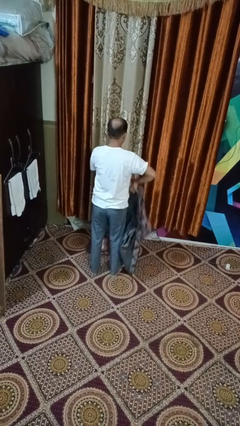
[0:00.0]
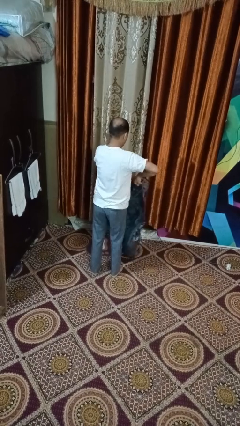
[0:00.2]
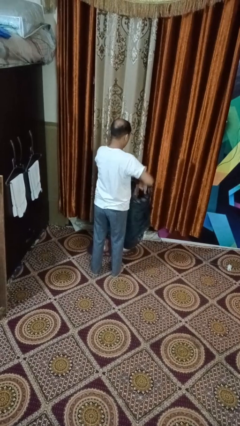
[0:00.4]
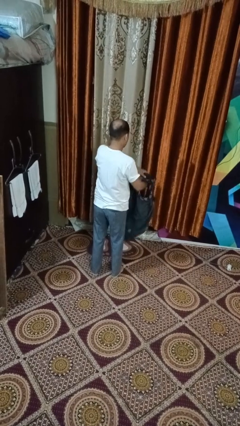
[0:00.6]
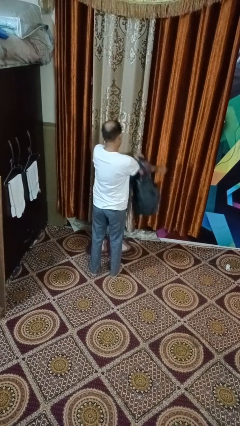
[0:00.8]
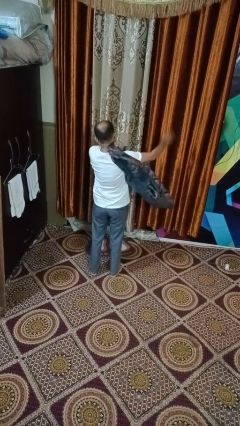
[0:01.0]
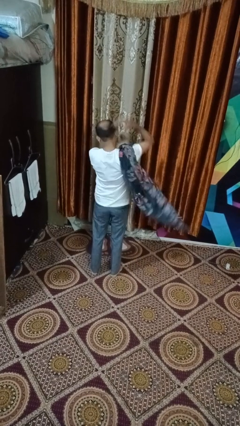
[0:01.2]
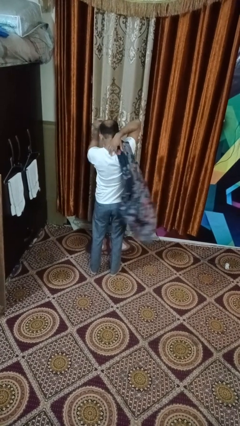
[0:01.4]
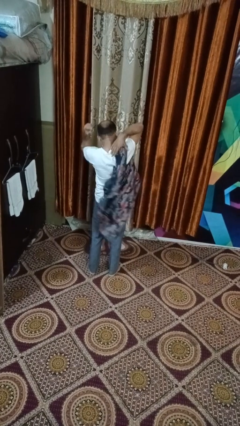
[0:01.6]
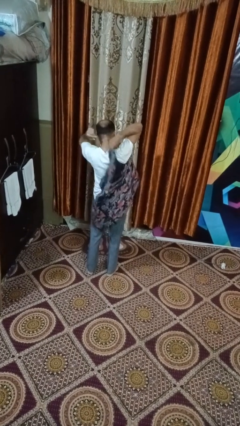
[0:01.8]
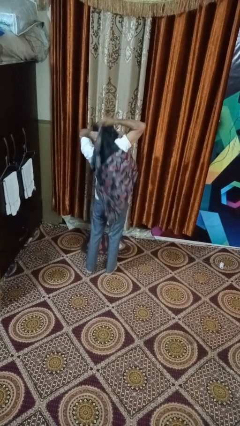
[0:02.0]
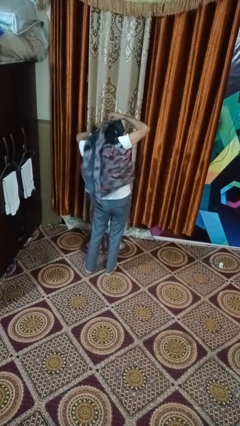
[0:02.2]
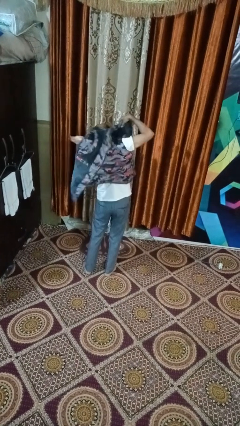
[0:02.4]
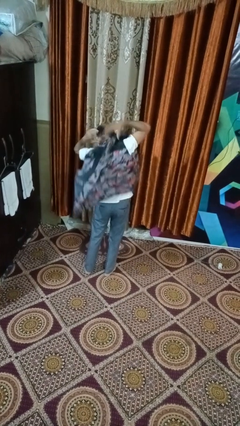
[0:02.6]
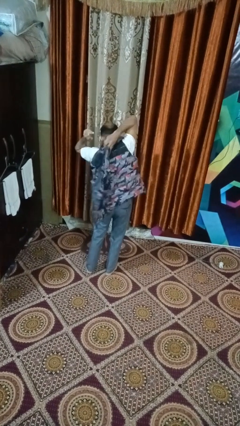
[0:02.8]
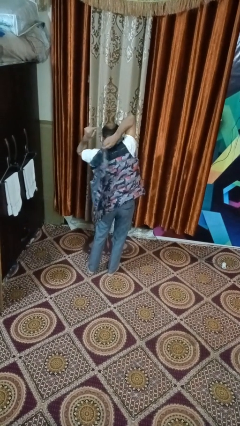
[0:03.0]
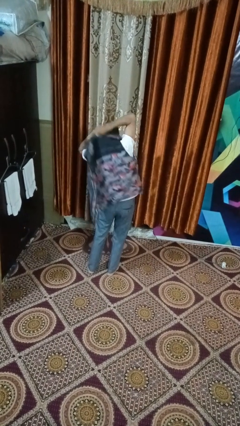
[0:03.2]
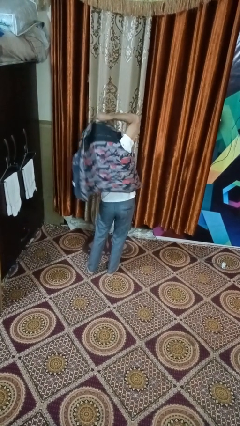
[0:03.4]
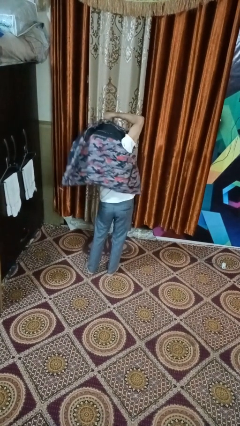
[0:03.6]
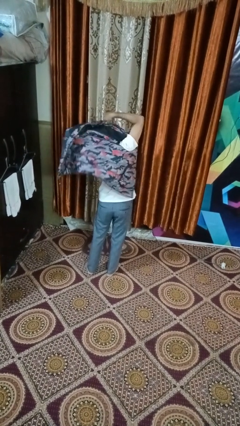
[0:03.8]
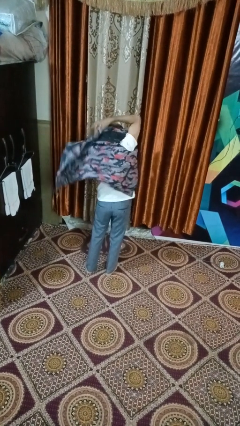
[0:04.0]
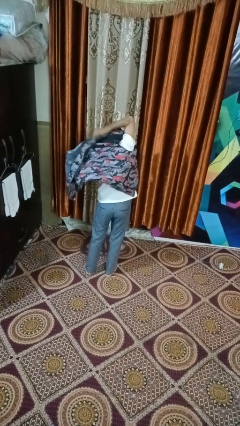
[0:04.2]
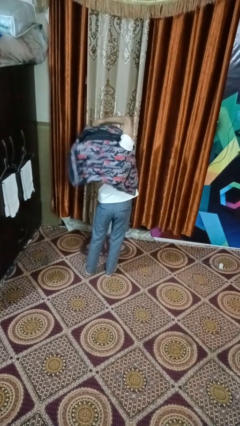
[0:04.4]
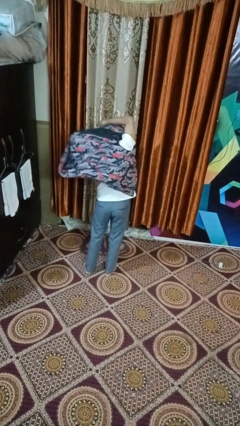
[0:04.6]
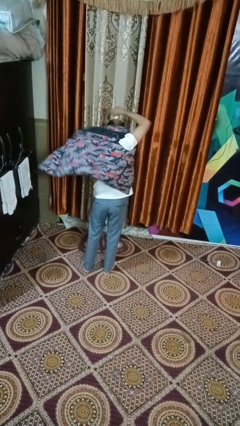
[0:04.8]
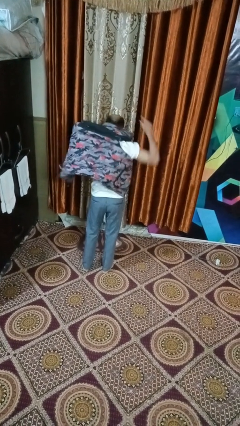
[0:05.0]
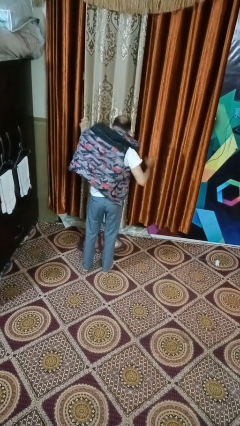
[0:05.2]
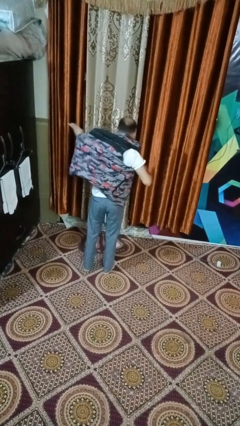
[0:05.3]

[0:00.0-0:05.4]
person puts on jacket

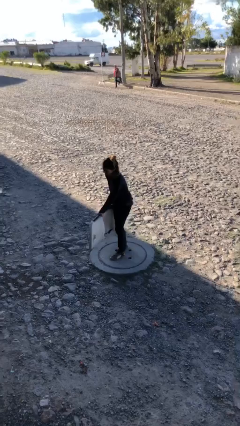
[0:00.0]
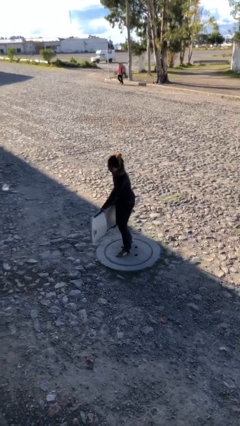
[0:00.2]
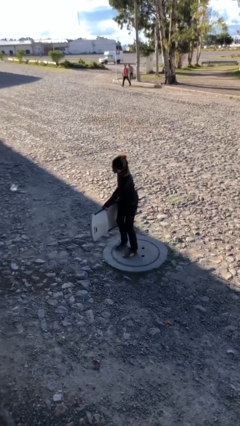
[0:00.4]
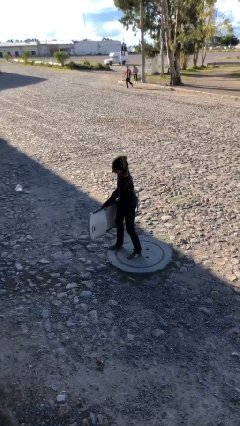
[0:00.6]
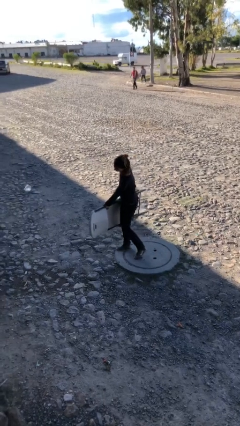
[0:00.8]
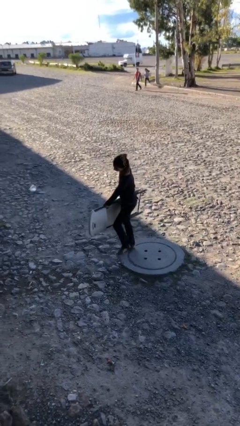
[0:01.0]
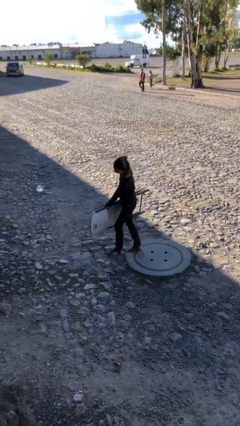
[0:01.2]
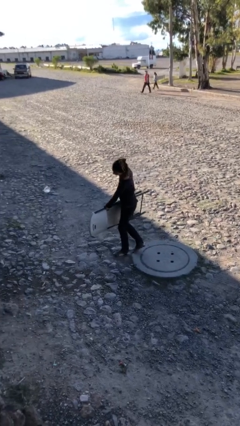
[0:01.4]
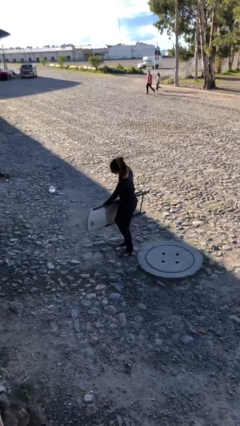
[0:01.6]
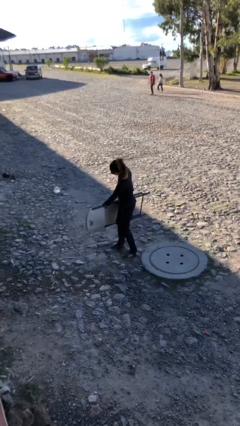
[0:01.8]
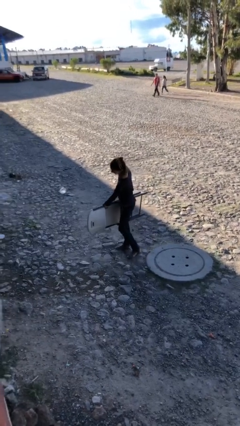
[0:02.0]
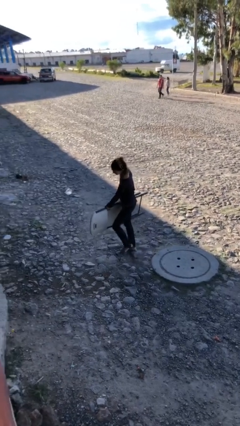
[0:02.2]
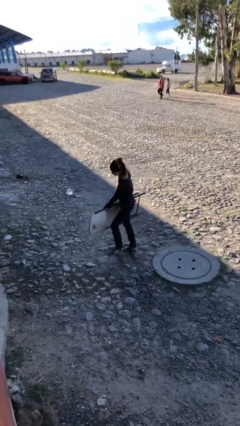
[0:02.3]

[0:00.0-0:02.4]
person carries heavy object

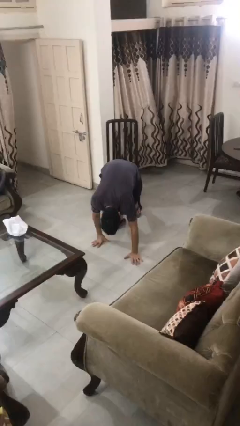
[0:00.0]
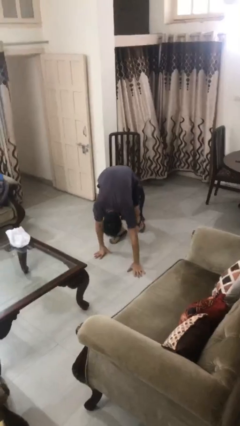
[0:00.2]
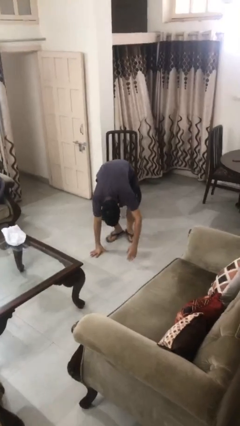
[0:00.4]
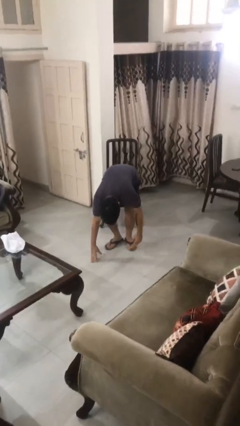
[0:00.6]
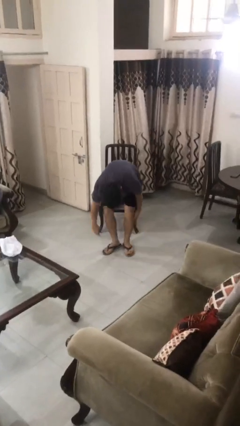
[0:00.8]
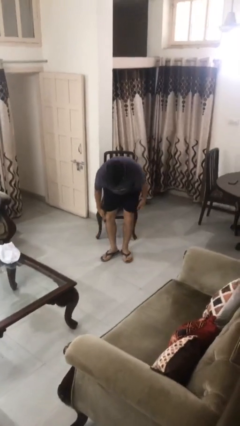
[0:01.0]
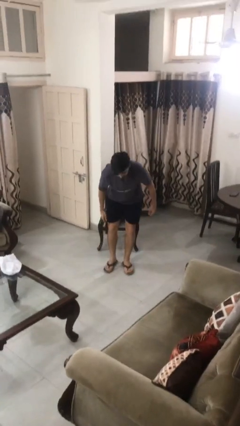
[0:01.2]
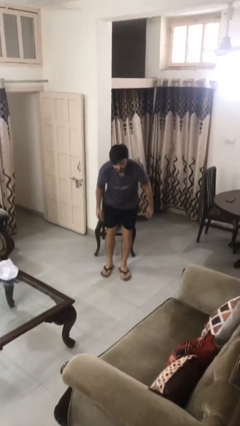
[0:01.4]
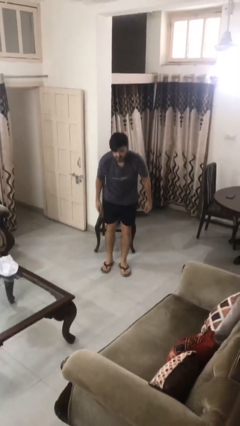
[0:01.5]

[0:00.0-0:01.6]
person stands up from floor

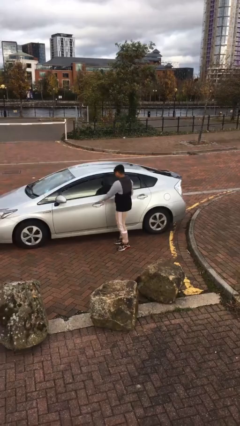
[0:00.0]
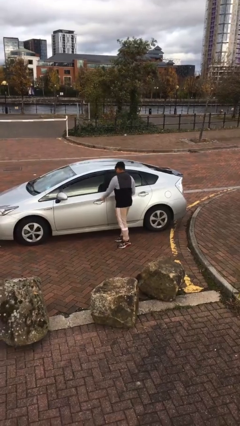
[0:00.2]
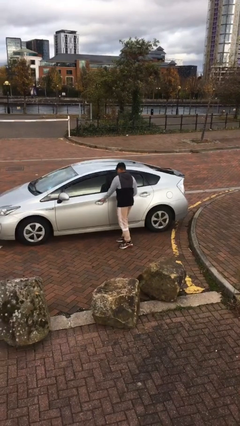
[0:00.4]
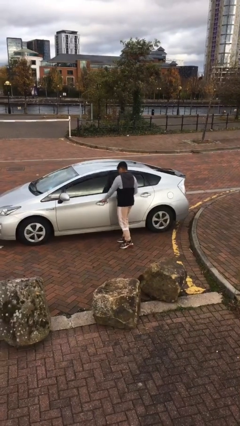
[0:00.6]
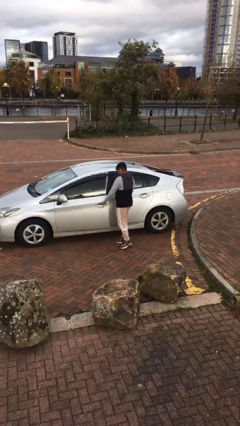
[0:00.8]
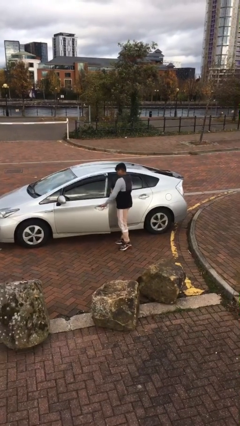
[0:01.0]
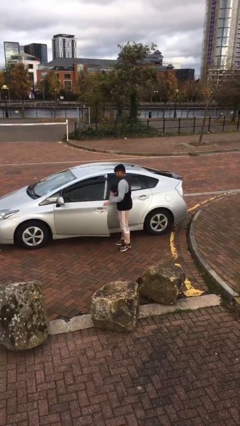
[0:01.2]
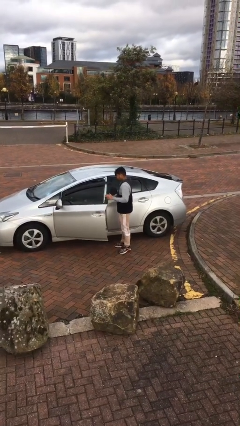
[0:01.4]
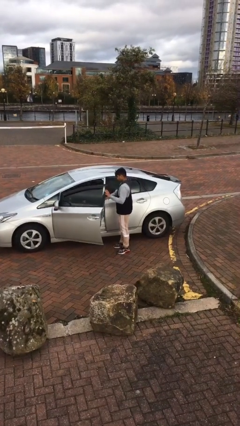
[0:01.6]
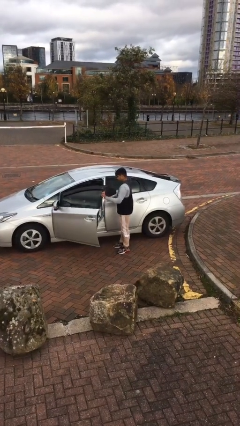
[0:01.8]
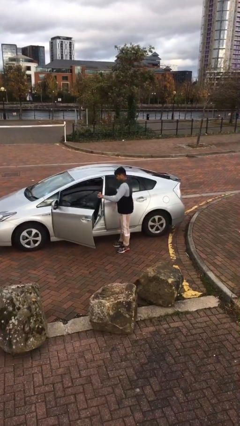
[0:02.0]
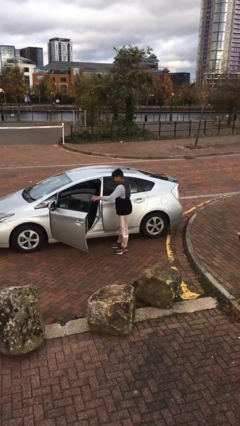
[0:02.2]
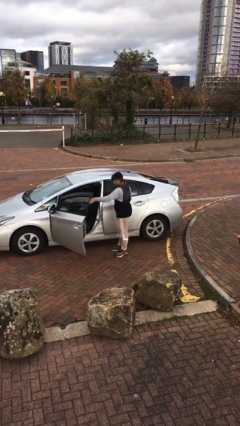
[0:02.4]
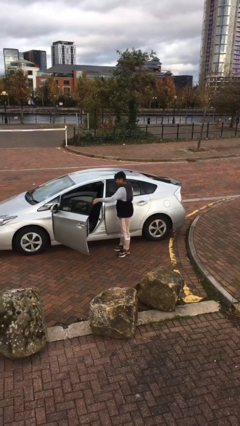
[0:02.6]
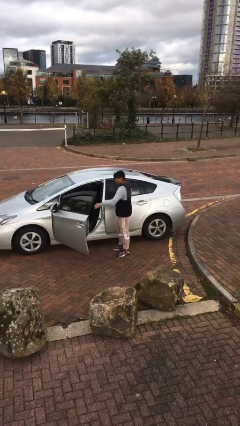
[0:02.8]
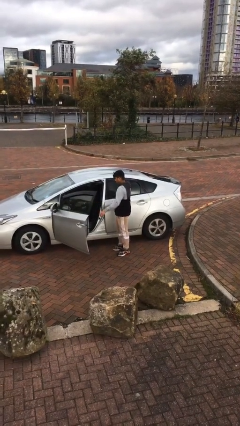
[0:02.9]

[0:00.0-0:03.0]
person opens car door

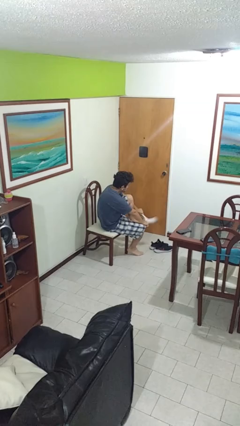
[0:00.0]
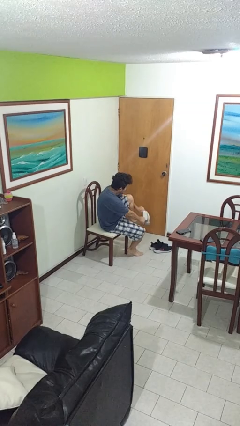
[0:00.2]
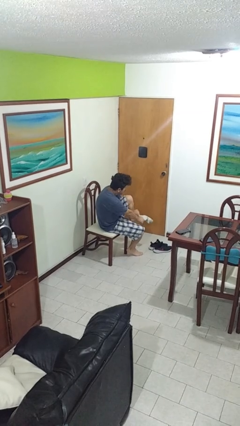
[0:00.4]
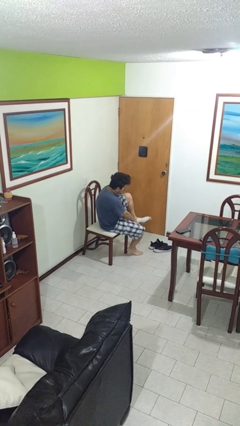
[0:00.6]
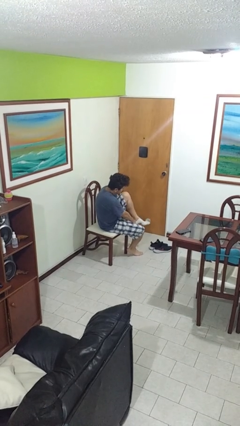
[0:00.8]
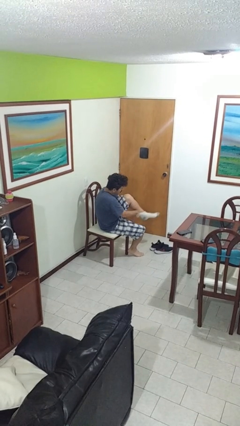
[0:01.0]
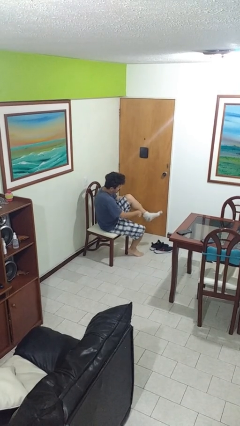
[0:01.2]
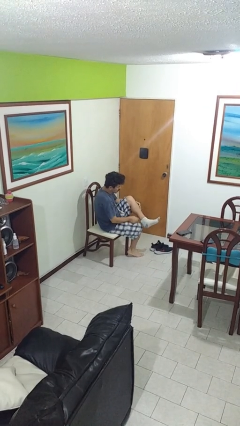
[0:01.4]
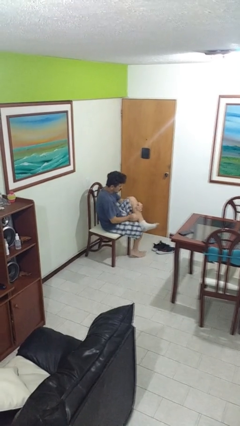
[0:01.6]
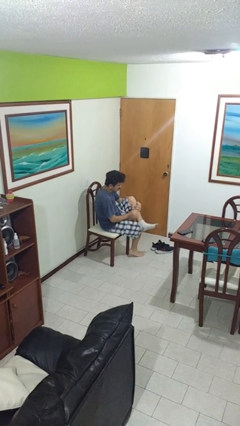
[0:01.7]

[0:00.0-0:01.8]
person puts on socks

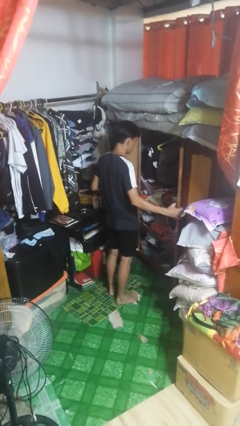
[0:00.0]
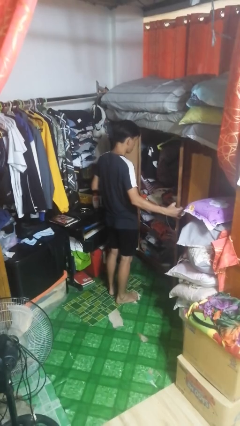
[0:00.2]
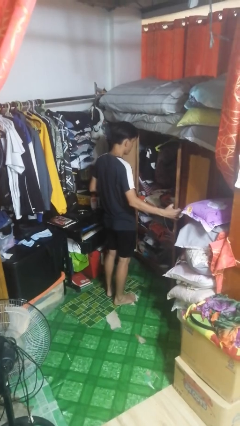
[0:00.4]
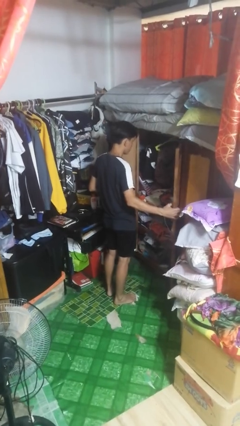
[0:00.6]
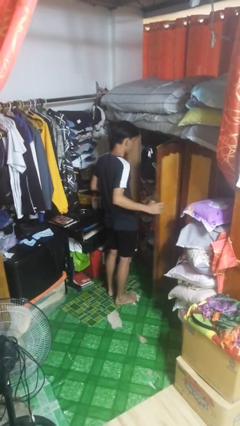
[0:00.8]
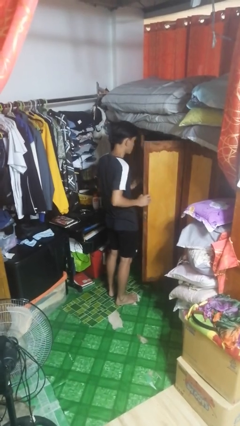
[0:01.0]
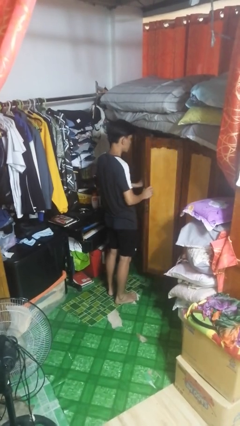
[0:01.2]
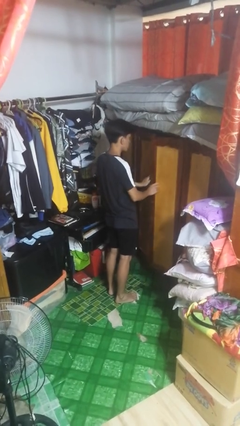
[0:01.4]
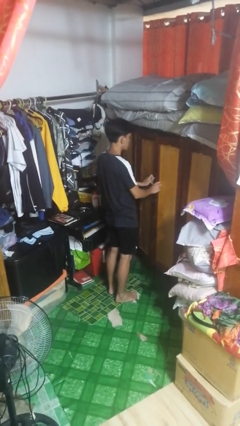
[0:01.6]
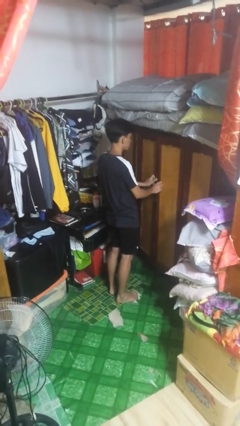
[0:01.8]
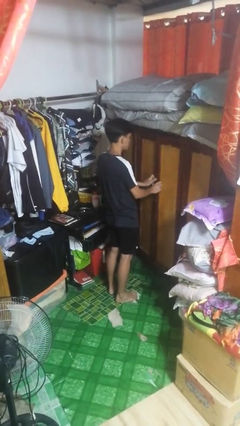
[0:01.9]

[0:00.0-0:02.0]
person closes dresser drawer

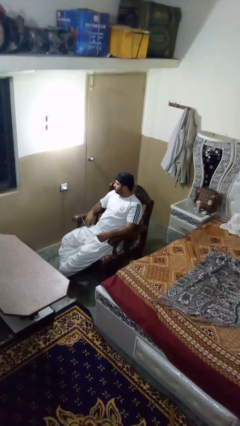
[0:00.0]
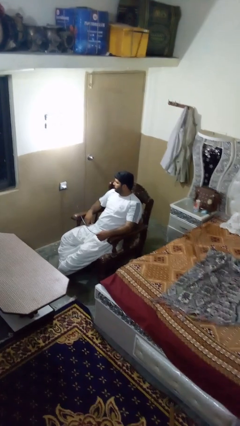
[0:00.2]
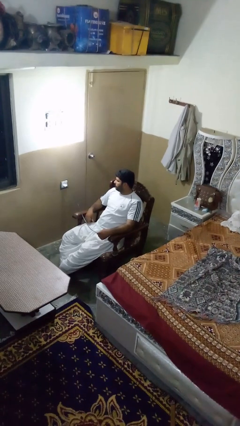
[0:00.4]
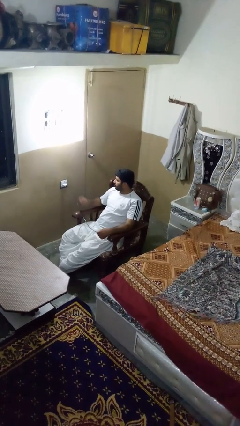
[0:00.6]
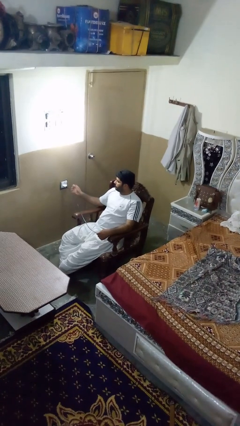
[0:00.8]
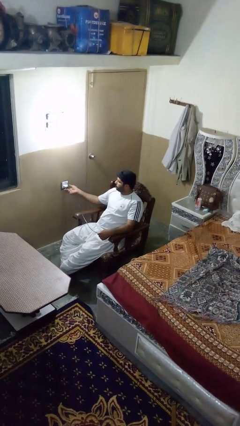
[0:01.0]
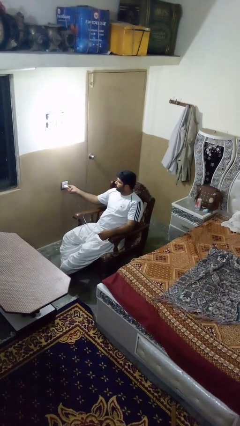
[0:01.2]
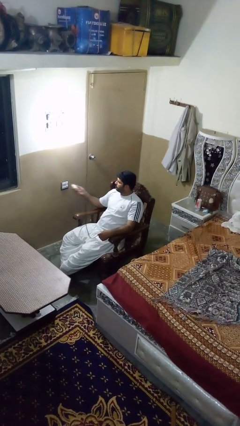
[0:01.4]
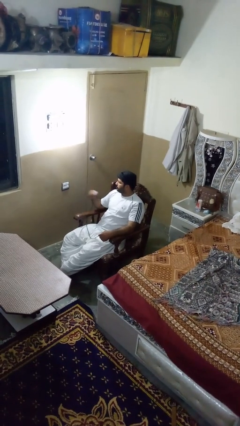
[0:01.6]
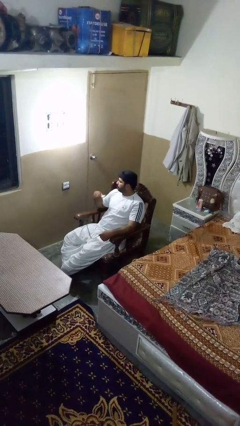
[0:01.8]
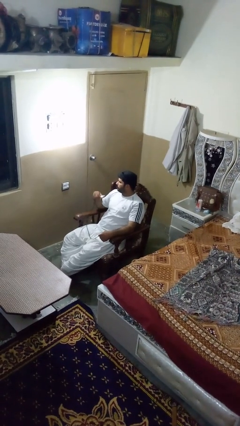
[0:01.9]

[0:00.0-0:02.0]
person unplugs from electrical socket
